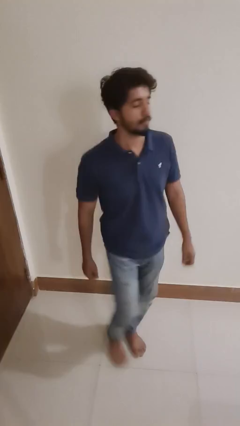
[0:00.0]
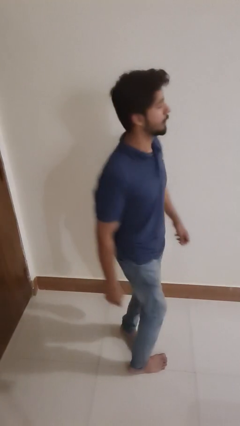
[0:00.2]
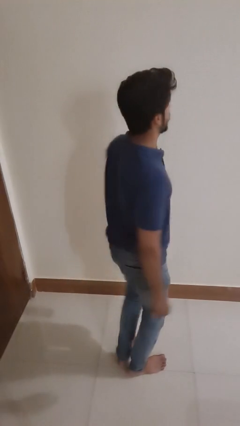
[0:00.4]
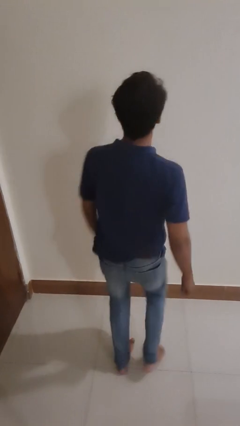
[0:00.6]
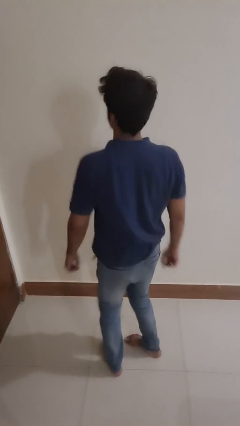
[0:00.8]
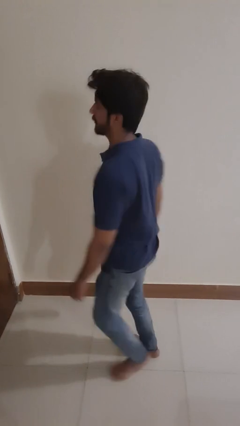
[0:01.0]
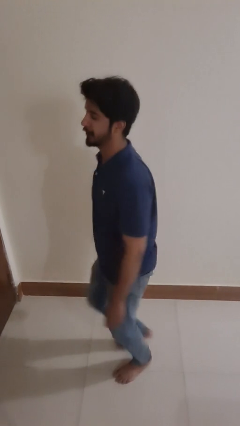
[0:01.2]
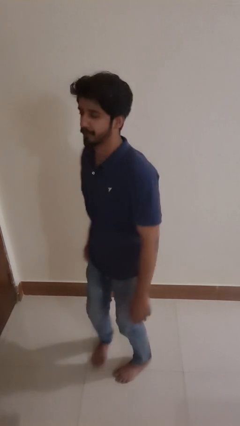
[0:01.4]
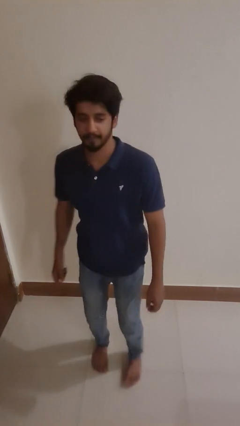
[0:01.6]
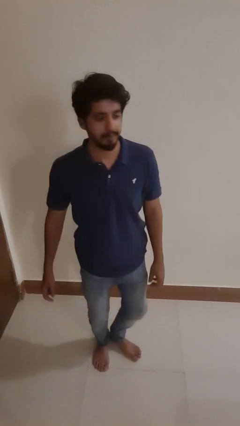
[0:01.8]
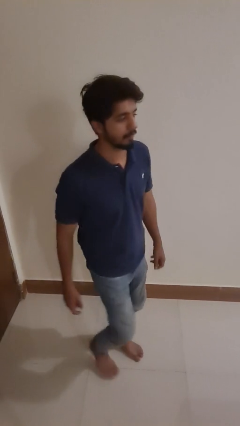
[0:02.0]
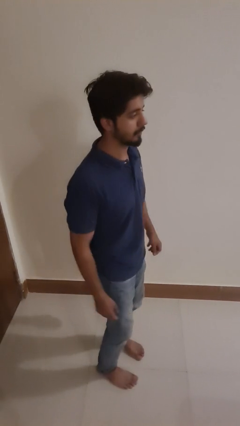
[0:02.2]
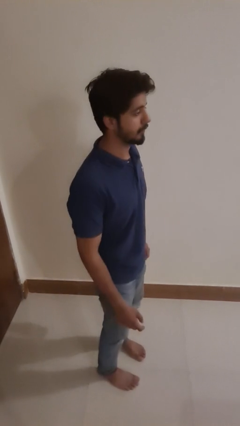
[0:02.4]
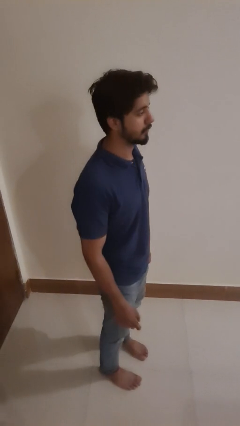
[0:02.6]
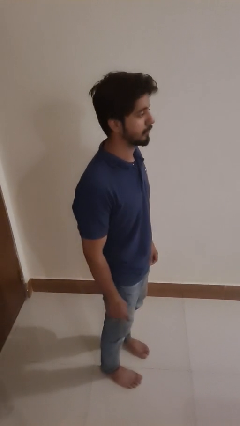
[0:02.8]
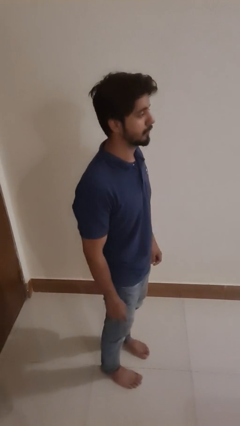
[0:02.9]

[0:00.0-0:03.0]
person twirls

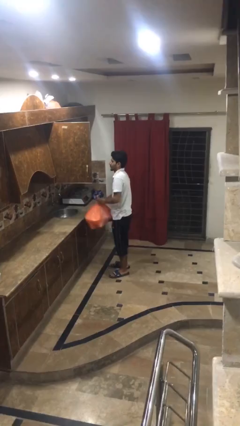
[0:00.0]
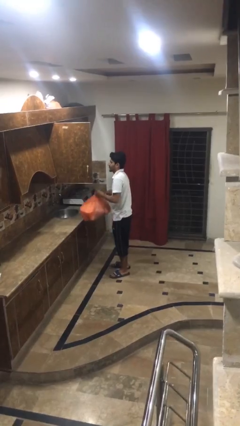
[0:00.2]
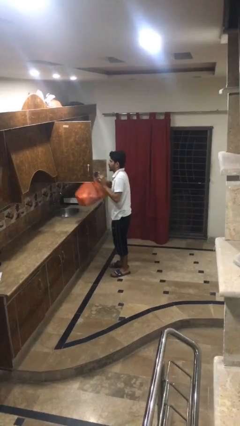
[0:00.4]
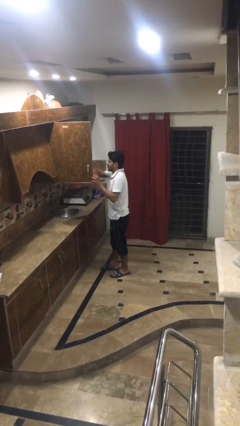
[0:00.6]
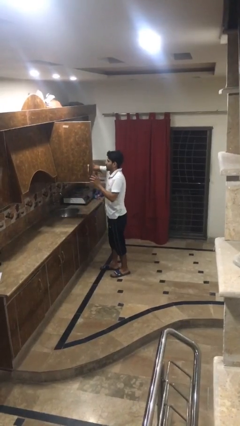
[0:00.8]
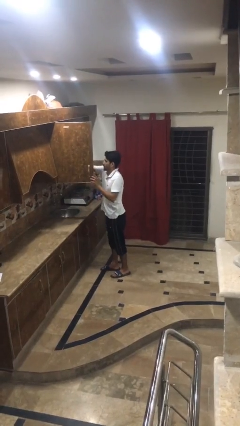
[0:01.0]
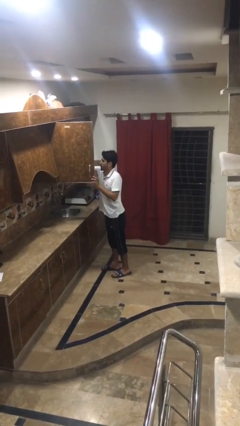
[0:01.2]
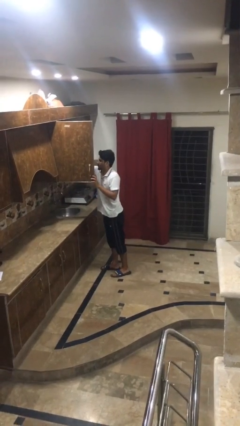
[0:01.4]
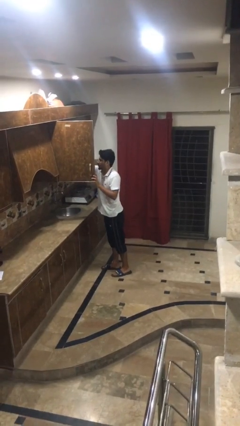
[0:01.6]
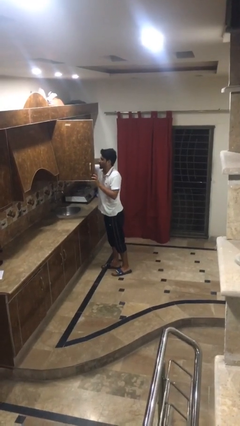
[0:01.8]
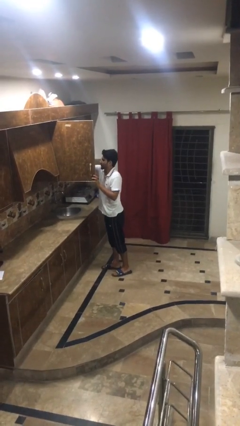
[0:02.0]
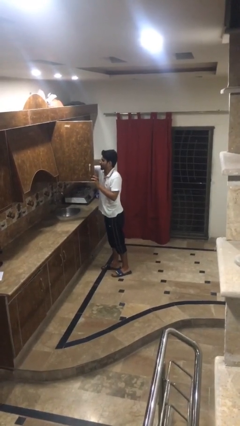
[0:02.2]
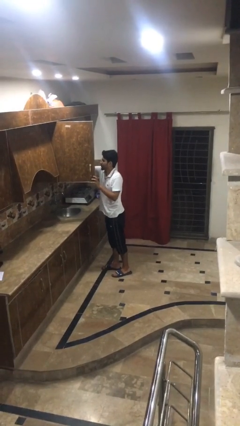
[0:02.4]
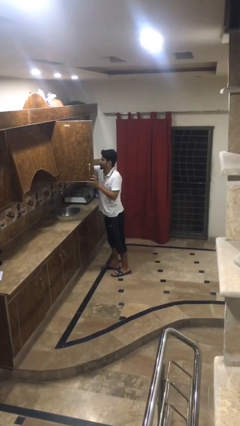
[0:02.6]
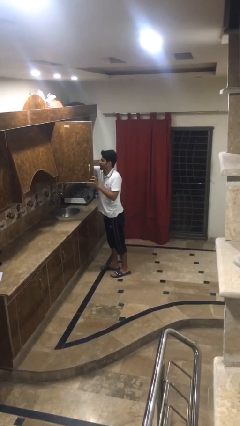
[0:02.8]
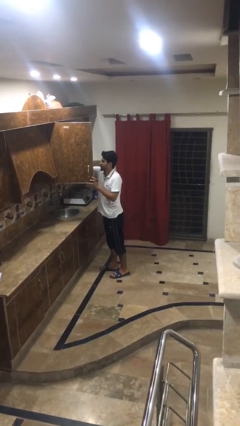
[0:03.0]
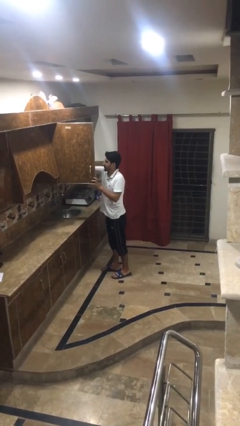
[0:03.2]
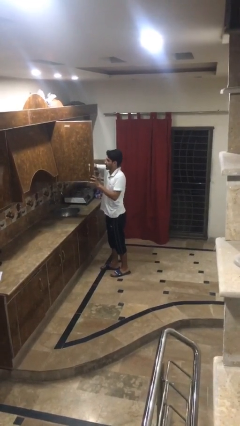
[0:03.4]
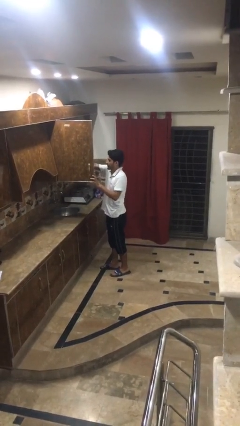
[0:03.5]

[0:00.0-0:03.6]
person loads groceries into cabinet

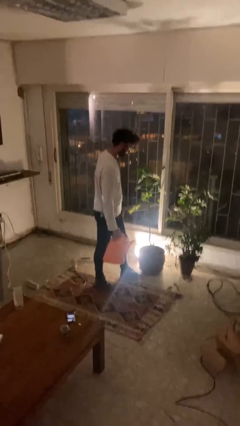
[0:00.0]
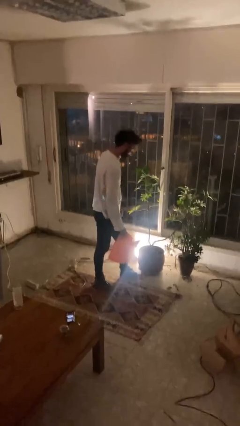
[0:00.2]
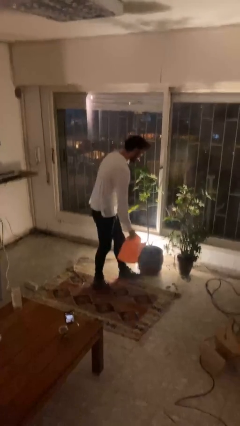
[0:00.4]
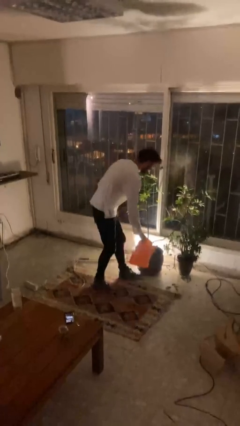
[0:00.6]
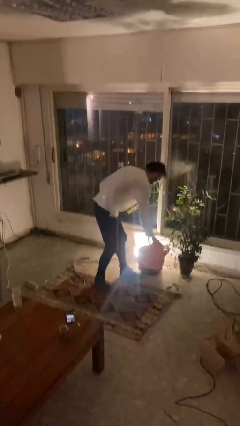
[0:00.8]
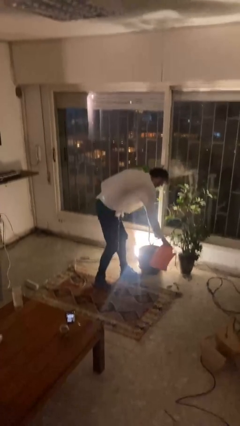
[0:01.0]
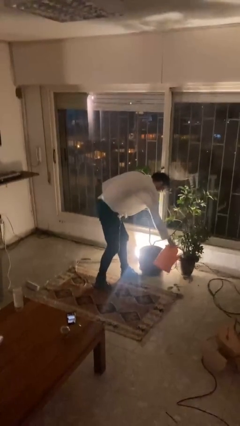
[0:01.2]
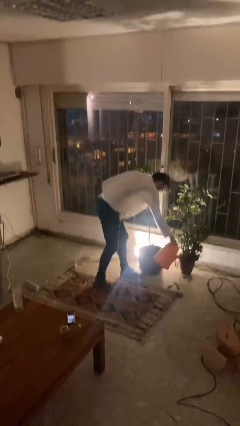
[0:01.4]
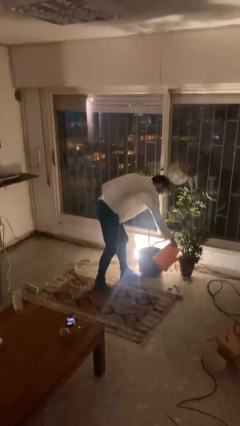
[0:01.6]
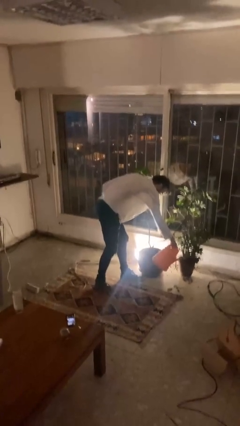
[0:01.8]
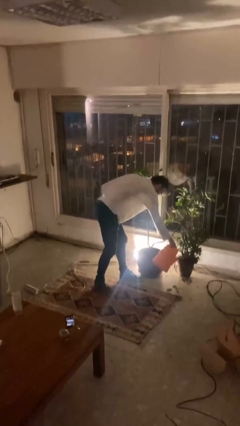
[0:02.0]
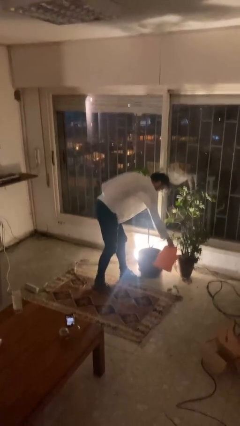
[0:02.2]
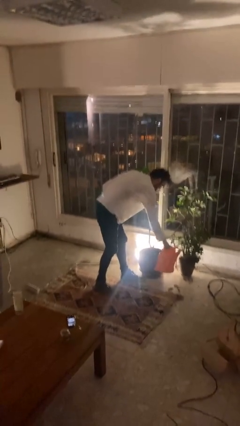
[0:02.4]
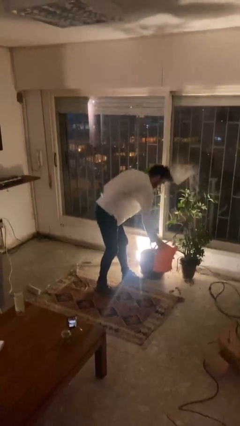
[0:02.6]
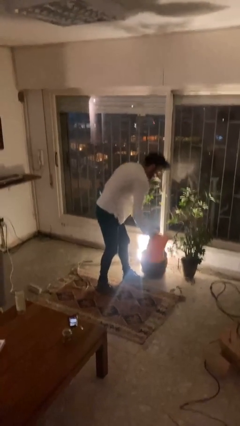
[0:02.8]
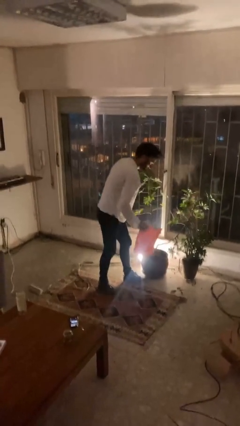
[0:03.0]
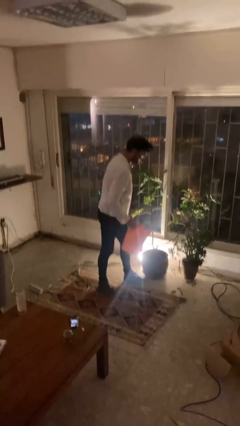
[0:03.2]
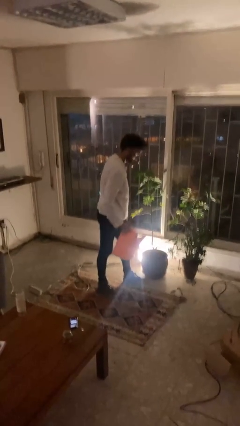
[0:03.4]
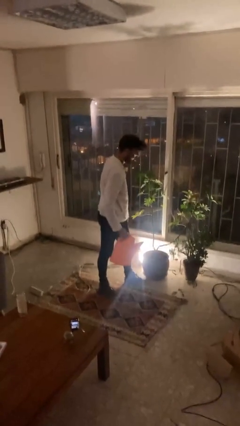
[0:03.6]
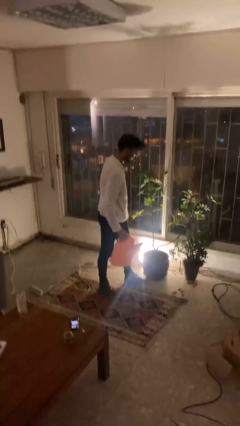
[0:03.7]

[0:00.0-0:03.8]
person waters houseplant

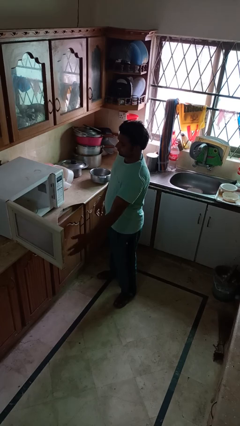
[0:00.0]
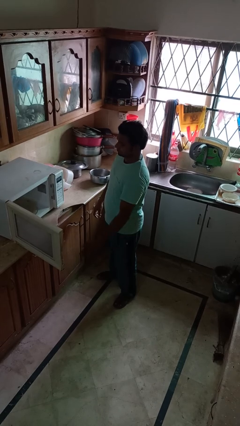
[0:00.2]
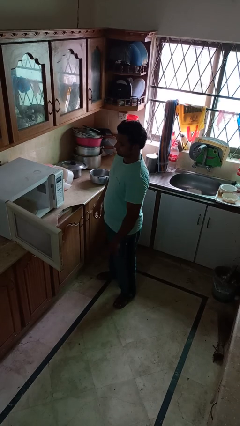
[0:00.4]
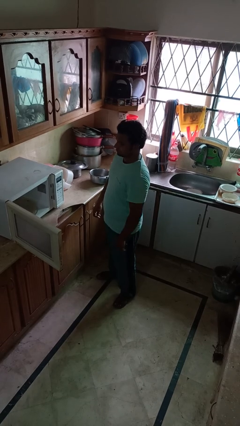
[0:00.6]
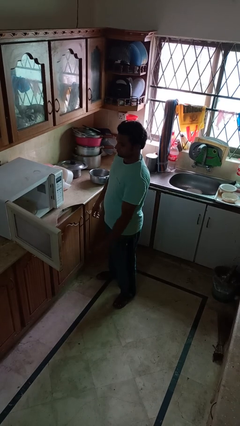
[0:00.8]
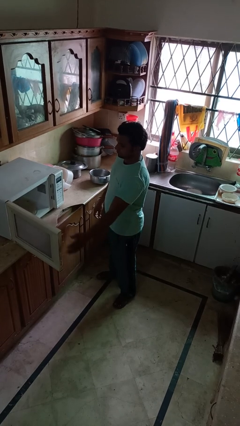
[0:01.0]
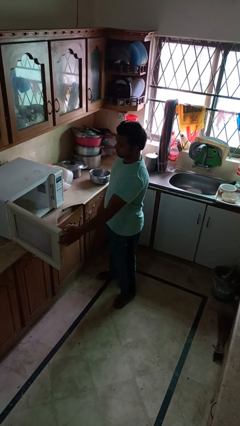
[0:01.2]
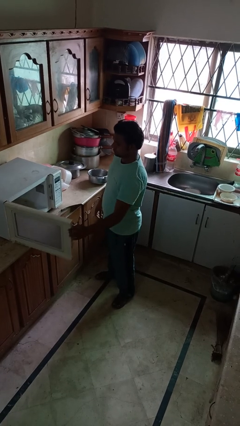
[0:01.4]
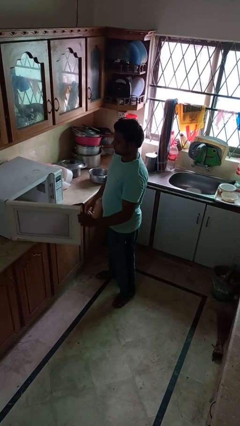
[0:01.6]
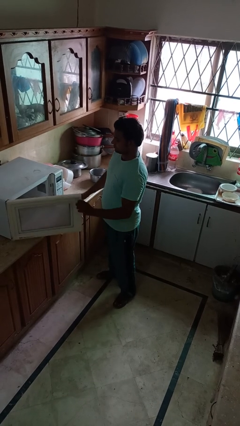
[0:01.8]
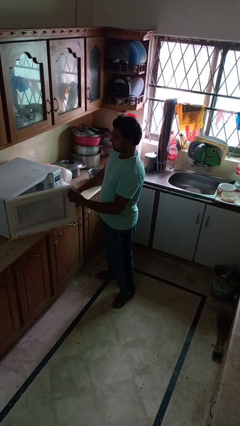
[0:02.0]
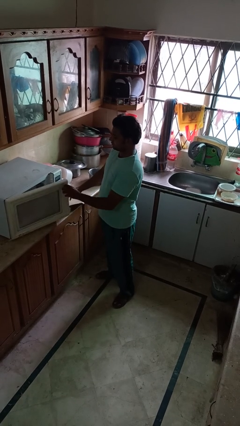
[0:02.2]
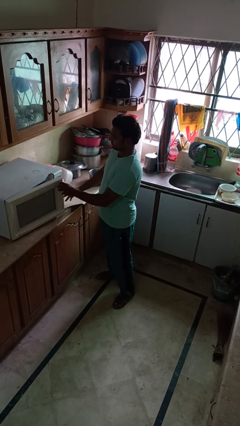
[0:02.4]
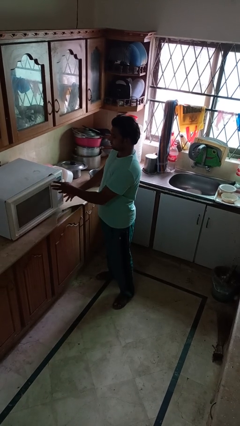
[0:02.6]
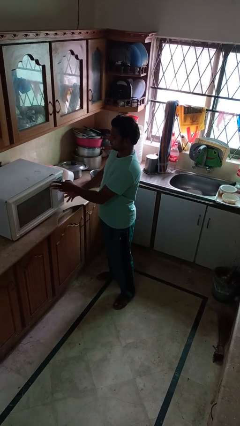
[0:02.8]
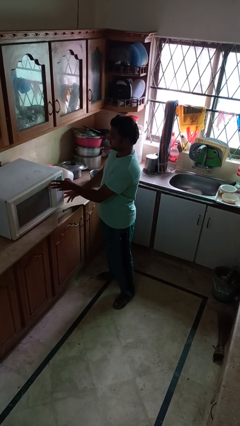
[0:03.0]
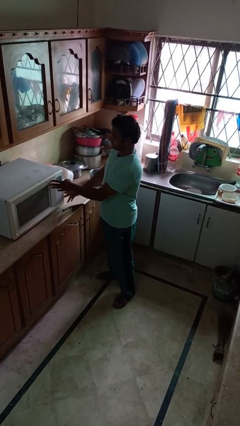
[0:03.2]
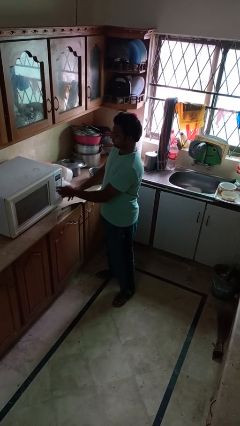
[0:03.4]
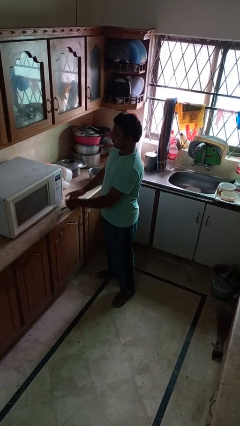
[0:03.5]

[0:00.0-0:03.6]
person closes microwave

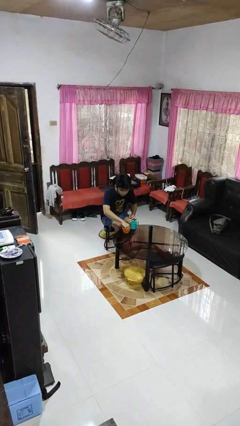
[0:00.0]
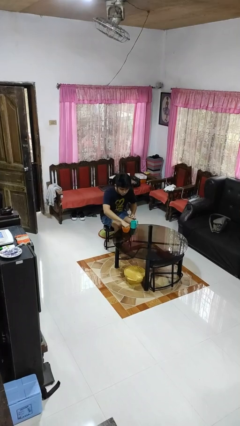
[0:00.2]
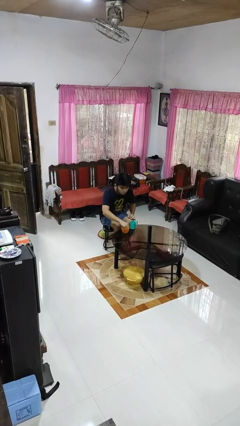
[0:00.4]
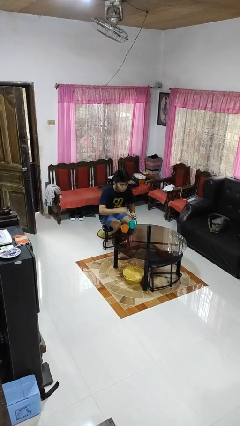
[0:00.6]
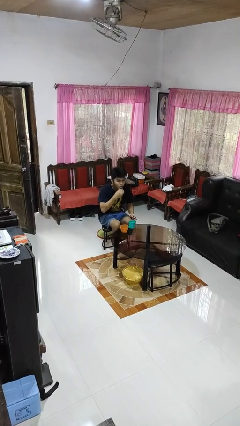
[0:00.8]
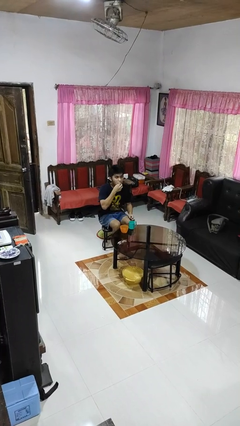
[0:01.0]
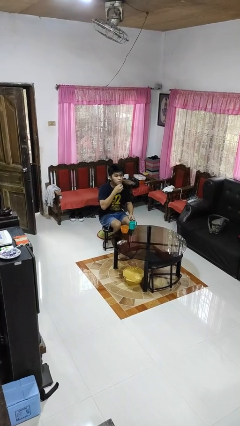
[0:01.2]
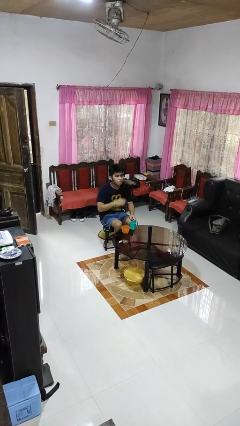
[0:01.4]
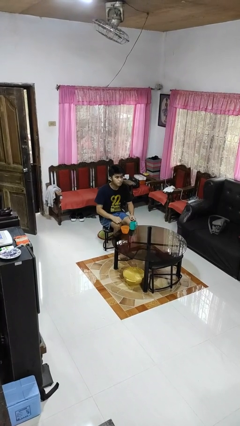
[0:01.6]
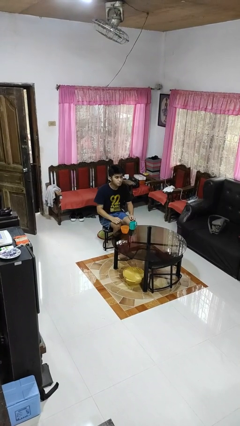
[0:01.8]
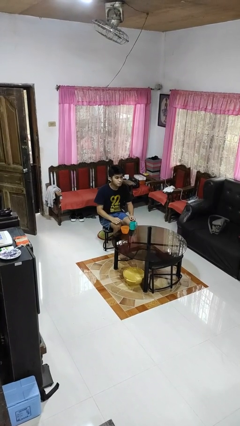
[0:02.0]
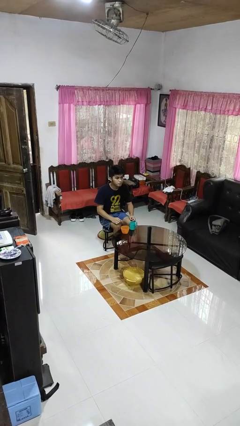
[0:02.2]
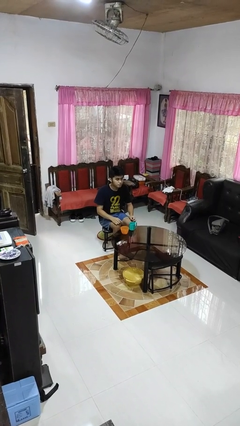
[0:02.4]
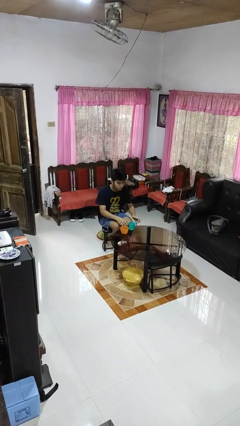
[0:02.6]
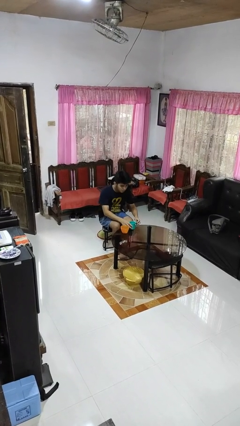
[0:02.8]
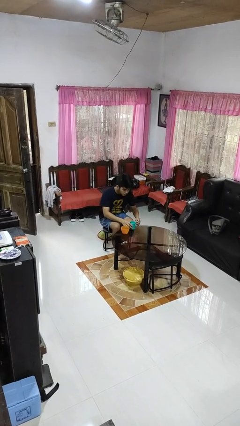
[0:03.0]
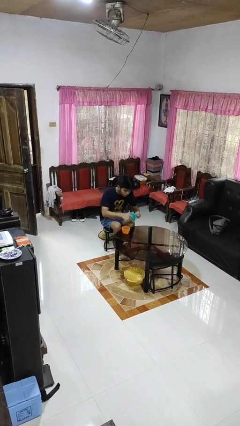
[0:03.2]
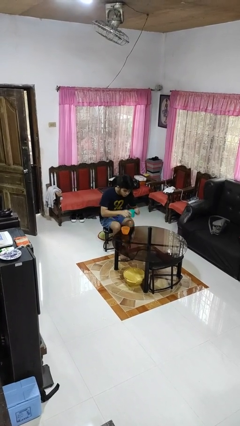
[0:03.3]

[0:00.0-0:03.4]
person takes medicine pills
